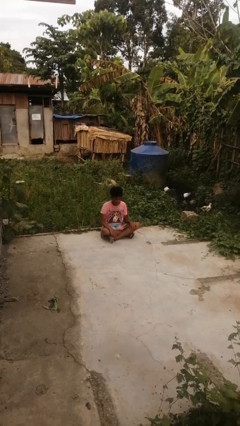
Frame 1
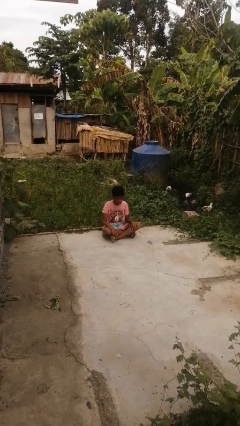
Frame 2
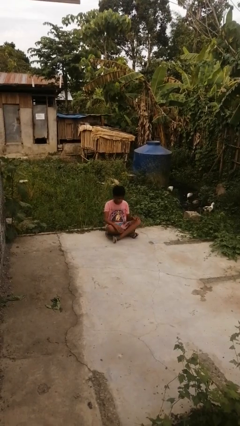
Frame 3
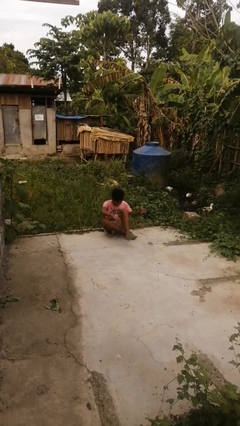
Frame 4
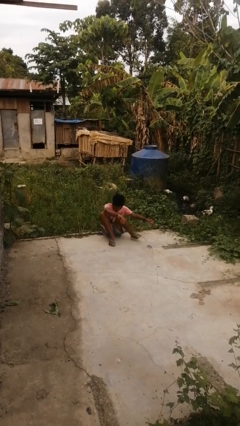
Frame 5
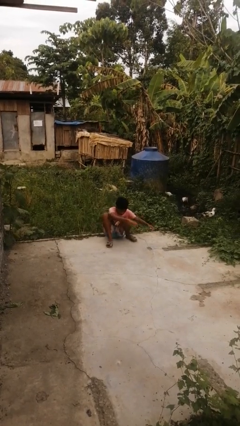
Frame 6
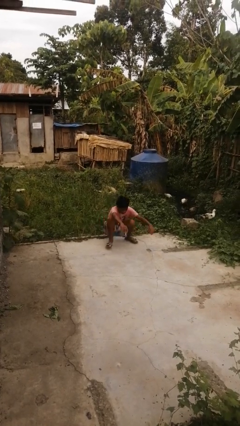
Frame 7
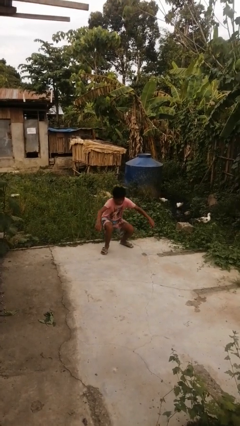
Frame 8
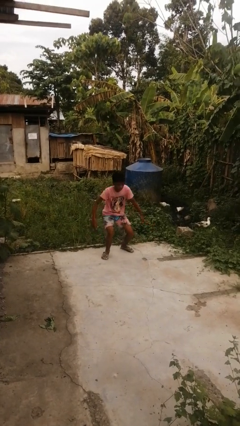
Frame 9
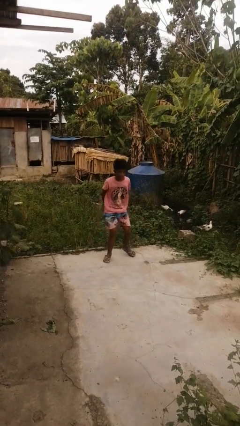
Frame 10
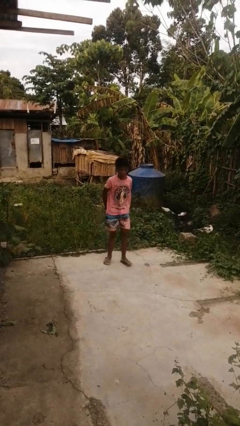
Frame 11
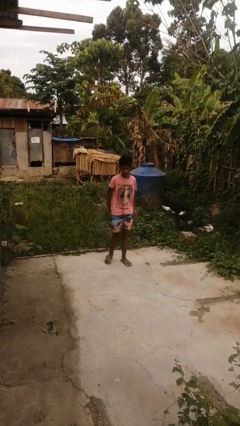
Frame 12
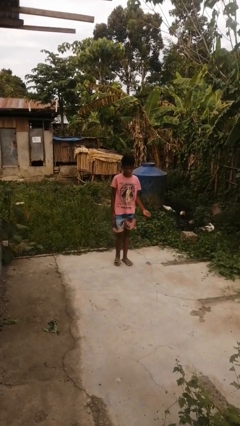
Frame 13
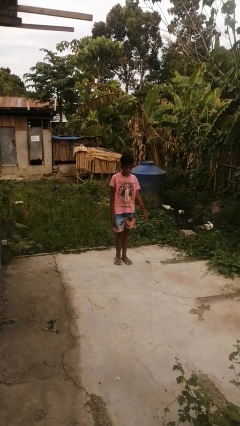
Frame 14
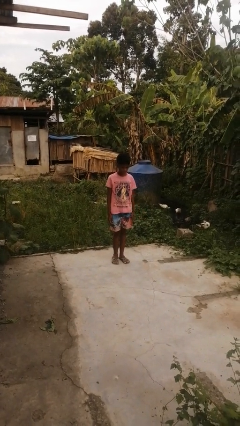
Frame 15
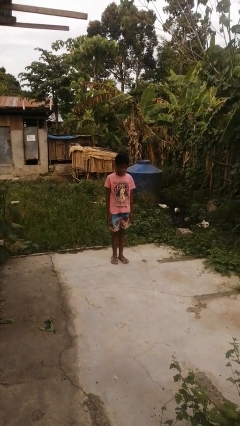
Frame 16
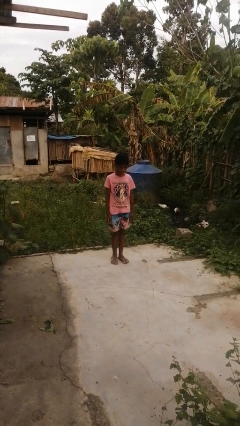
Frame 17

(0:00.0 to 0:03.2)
person stands up from floor

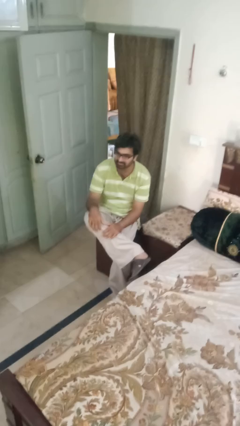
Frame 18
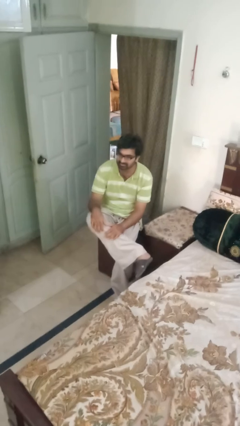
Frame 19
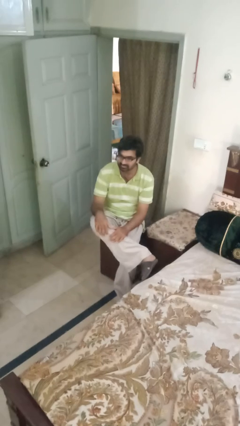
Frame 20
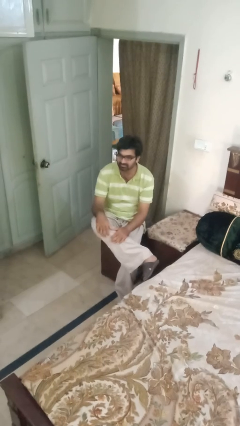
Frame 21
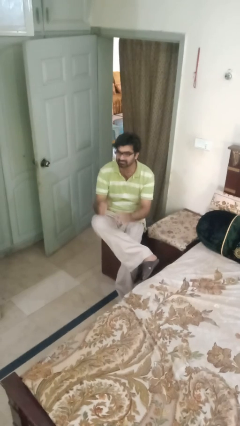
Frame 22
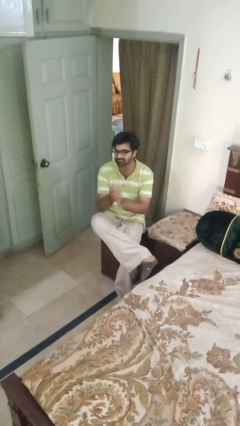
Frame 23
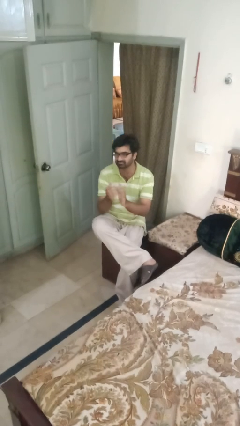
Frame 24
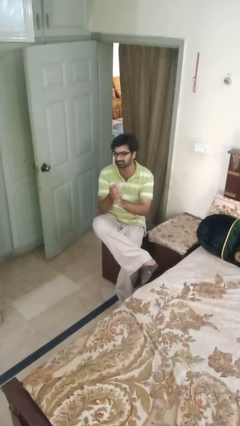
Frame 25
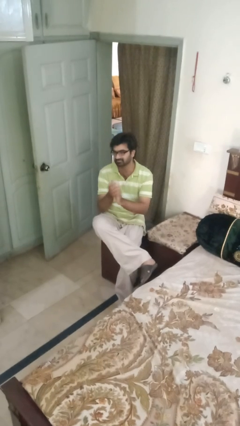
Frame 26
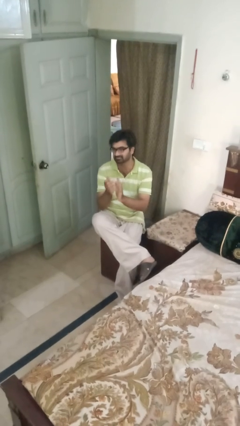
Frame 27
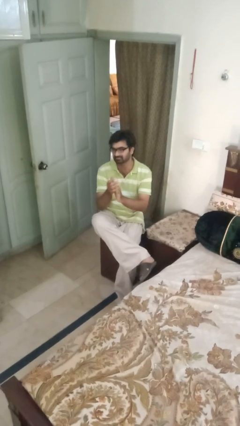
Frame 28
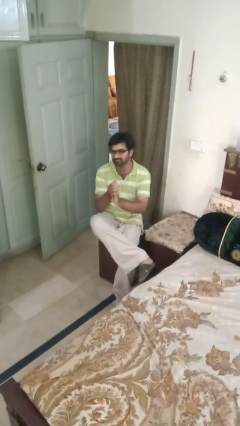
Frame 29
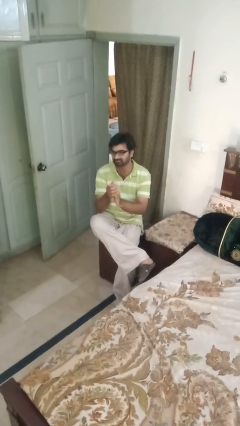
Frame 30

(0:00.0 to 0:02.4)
person claps hands

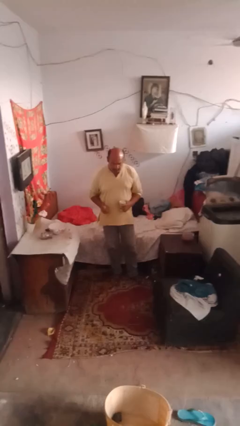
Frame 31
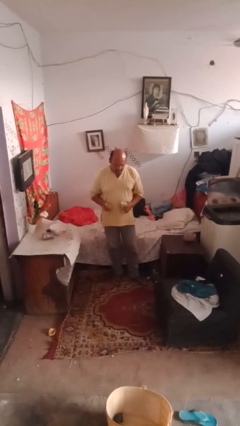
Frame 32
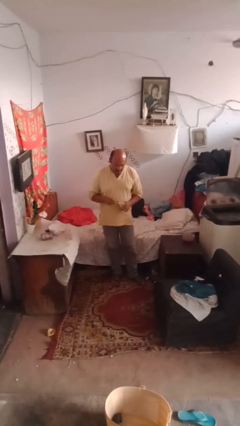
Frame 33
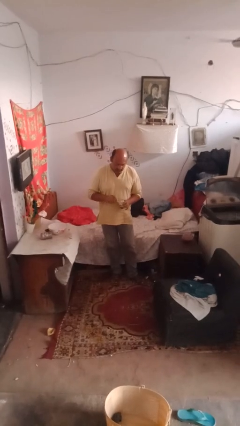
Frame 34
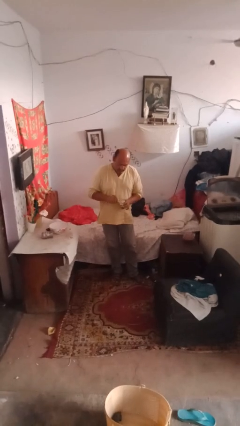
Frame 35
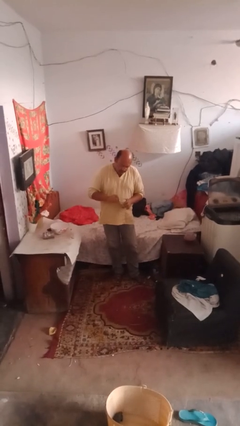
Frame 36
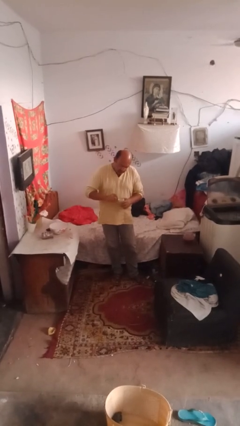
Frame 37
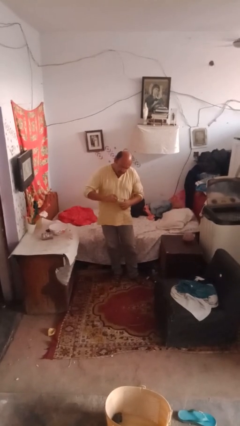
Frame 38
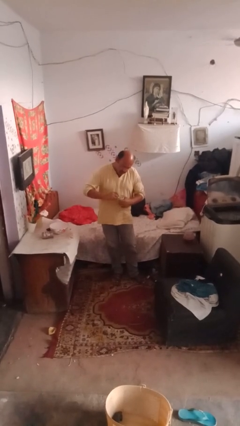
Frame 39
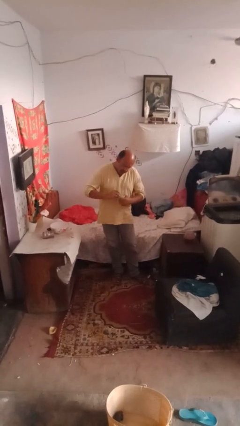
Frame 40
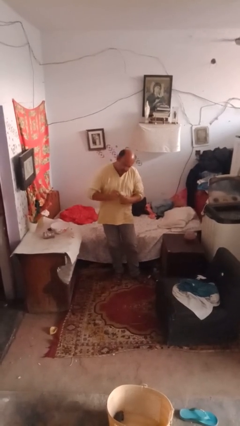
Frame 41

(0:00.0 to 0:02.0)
person opens can with can opener

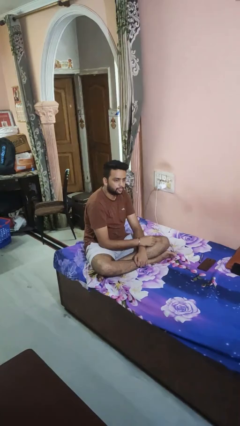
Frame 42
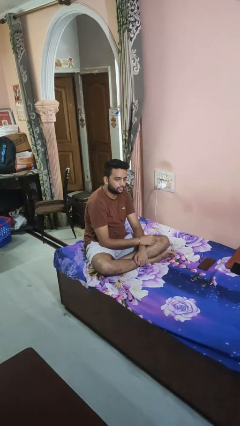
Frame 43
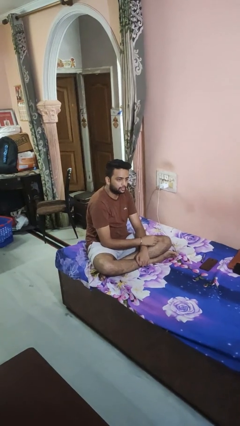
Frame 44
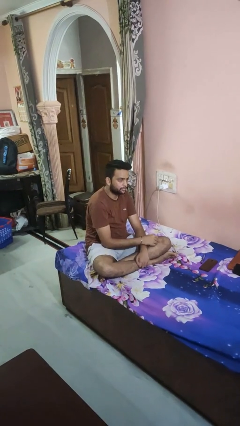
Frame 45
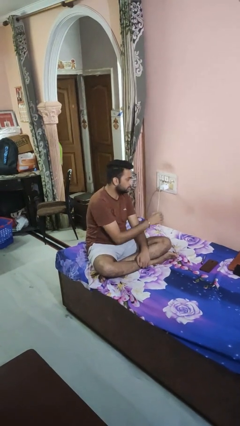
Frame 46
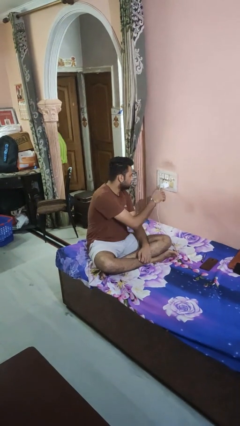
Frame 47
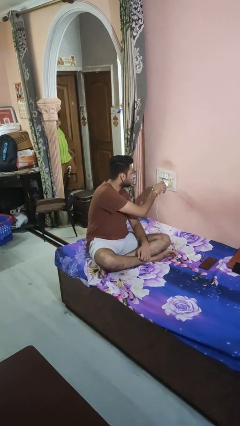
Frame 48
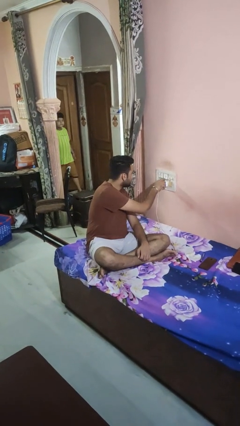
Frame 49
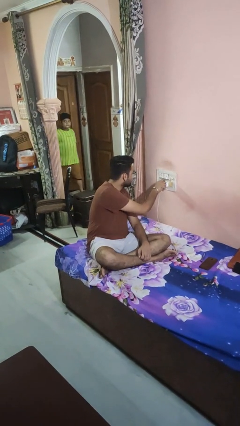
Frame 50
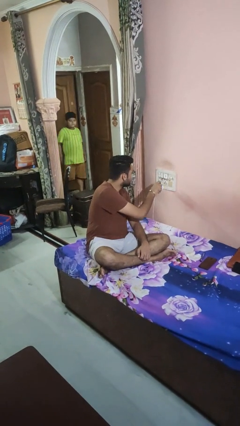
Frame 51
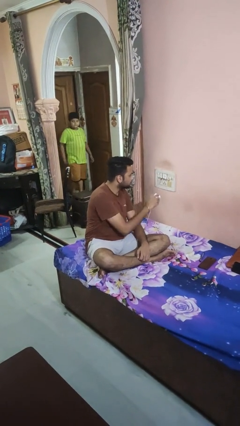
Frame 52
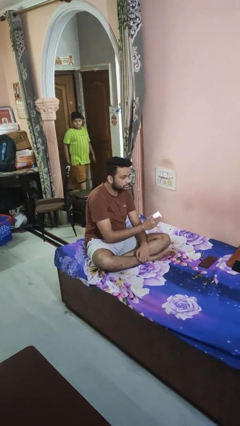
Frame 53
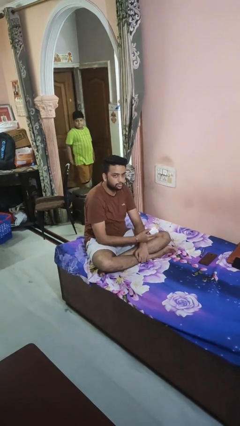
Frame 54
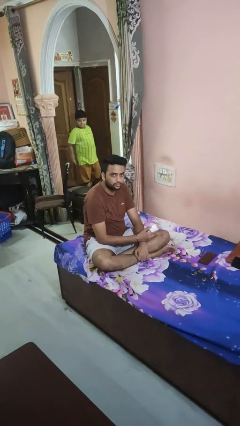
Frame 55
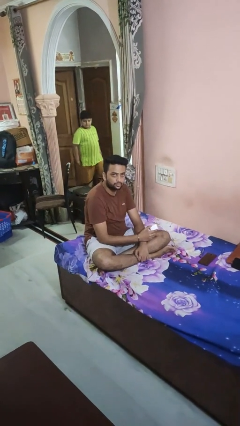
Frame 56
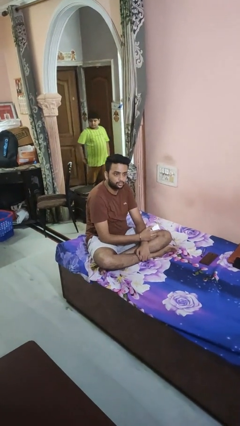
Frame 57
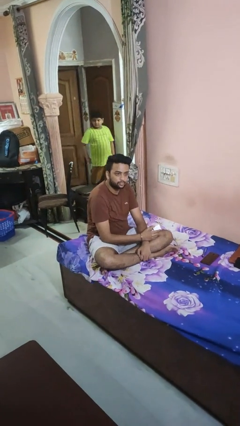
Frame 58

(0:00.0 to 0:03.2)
person unplugs from electrical socket

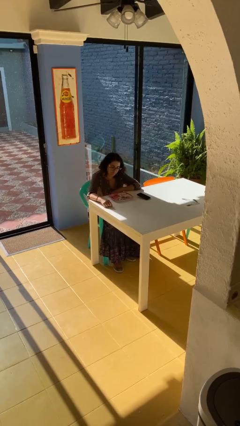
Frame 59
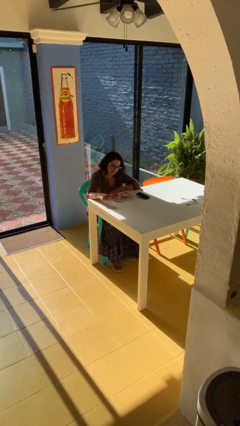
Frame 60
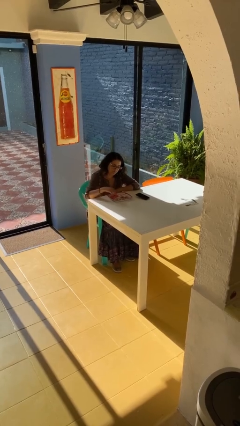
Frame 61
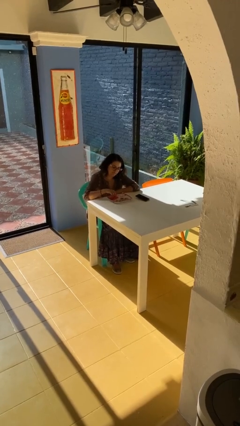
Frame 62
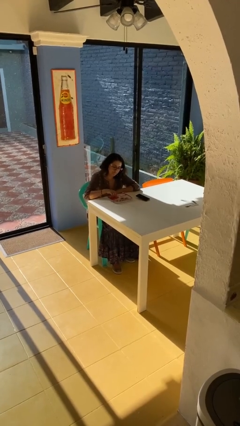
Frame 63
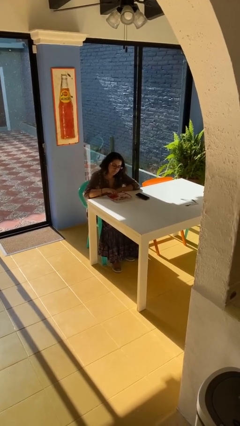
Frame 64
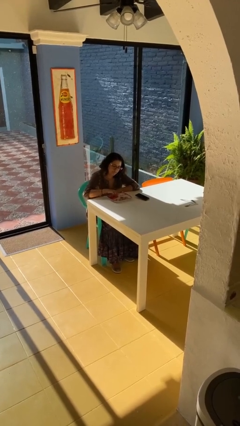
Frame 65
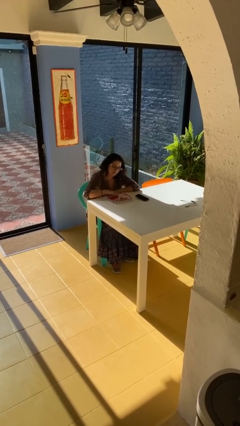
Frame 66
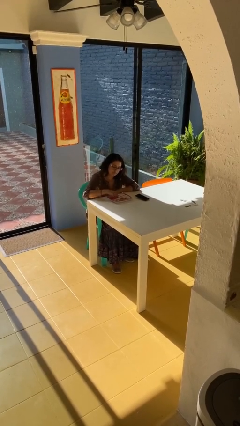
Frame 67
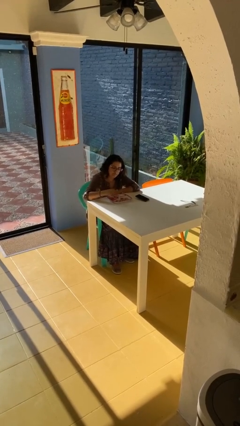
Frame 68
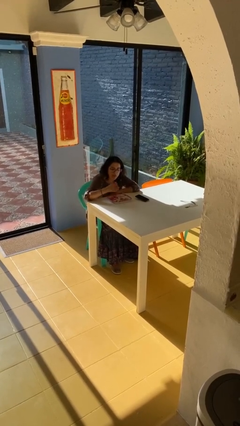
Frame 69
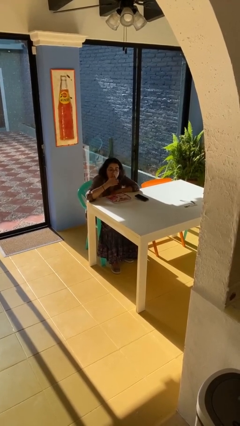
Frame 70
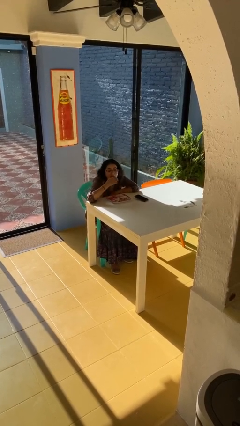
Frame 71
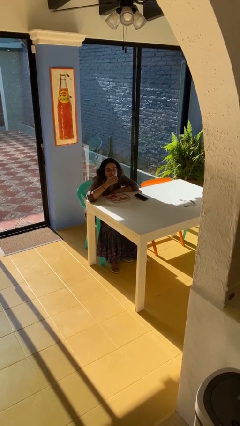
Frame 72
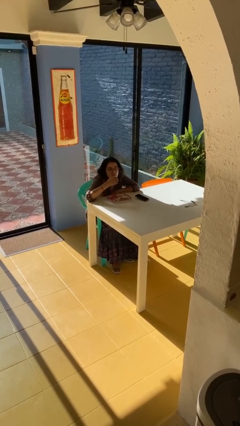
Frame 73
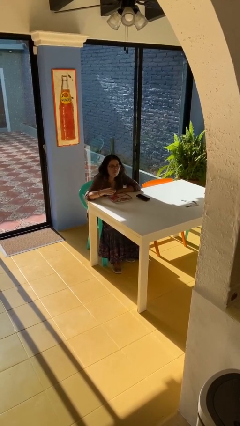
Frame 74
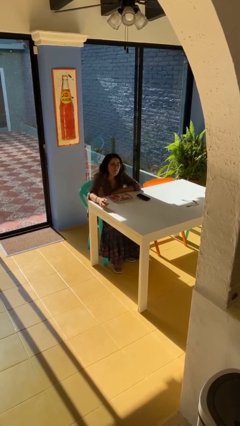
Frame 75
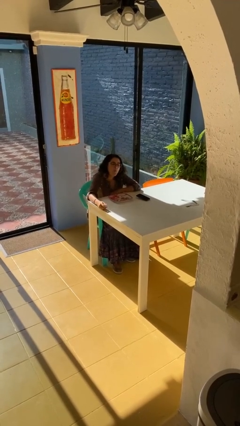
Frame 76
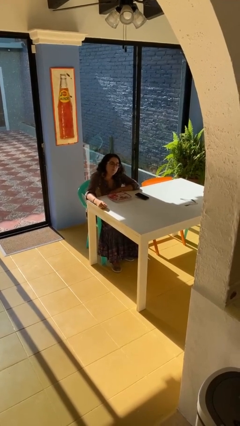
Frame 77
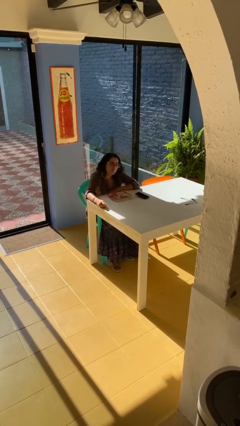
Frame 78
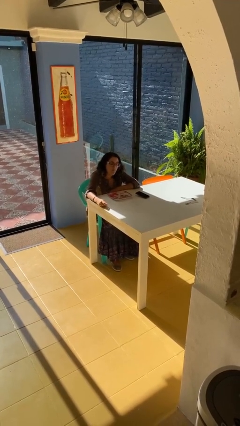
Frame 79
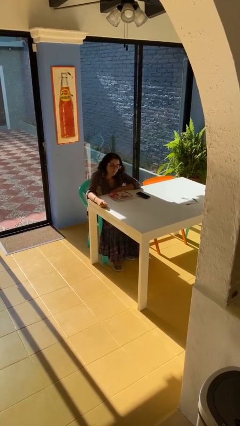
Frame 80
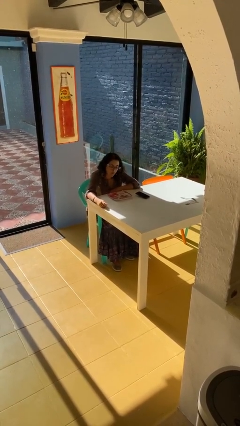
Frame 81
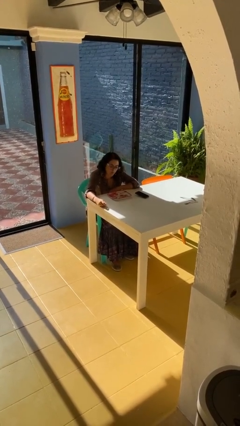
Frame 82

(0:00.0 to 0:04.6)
person eats with hands

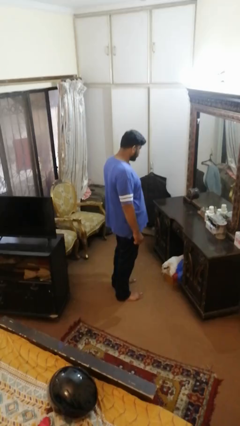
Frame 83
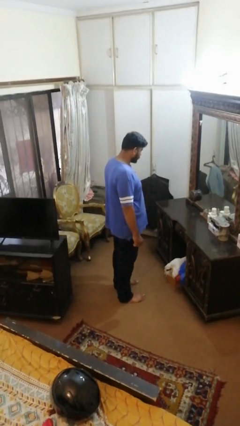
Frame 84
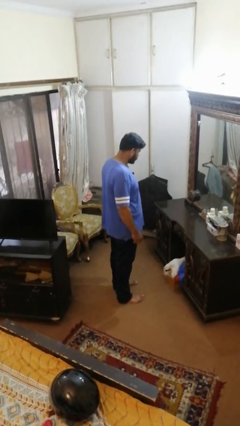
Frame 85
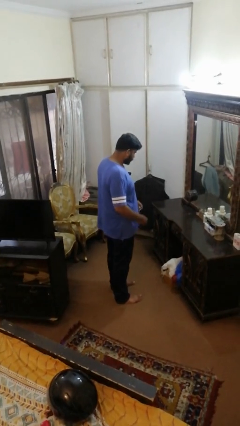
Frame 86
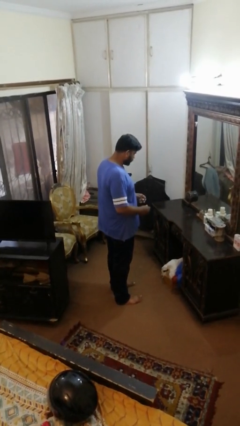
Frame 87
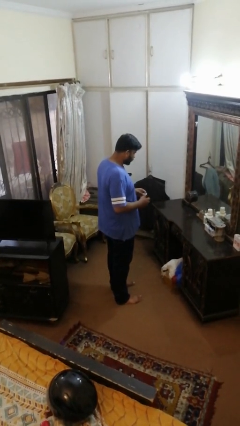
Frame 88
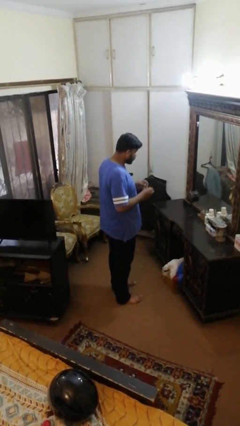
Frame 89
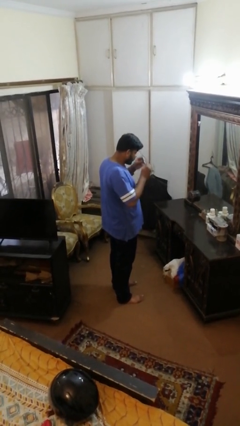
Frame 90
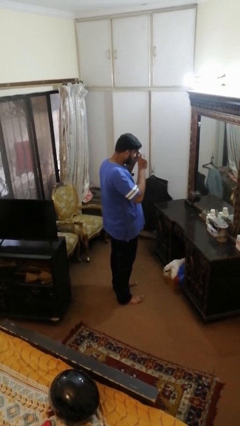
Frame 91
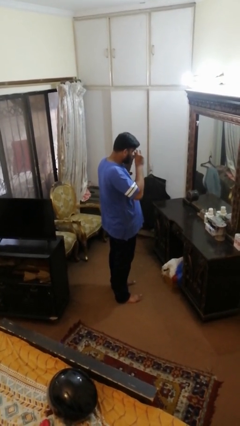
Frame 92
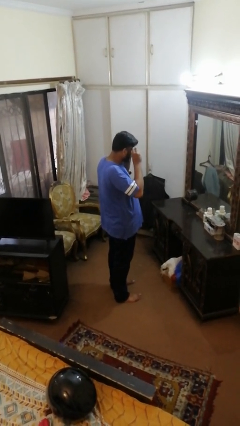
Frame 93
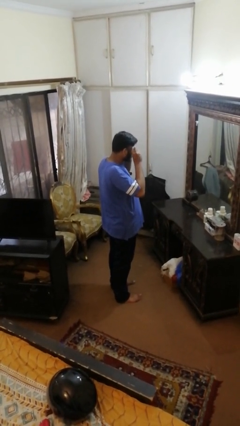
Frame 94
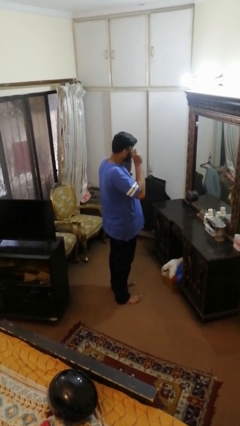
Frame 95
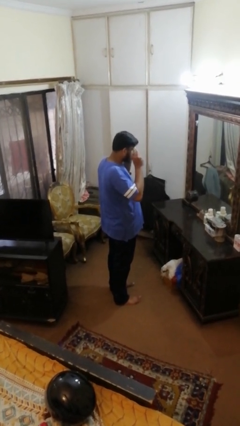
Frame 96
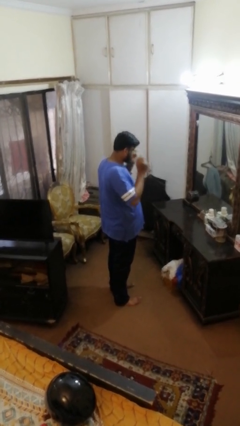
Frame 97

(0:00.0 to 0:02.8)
person puts on glasses
